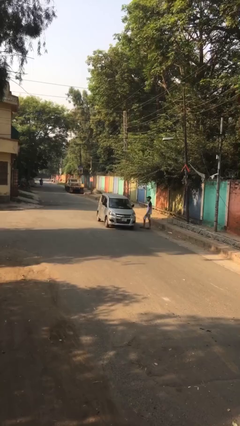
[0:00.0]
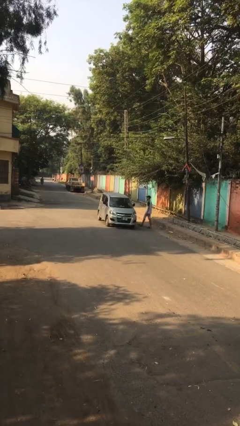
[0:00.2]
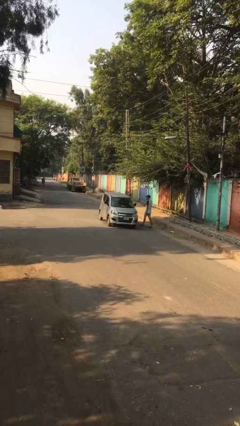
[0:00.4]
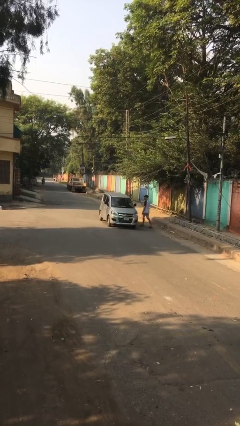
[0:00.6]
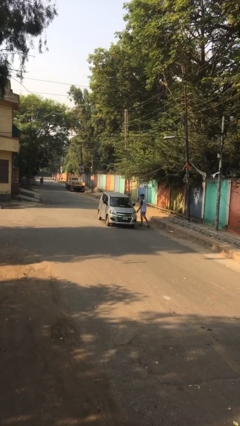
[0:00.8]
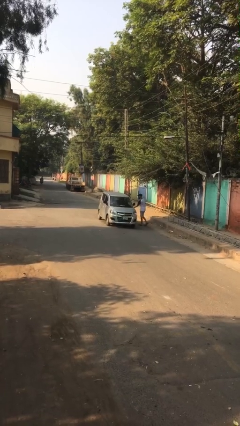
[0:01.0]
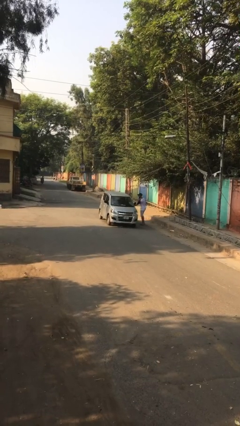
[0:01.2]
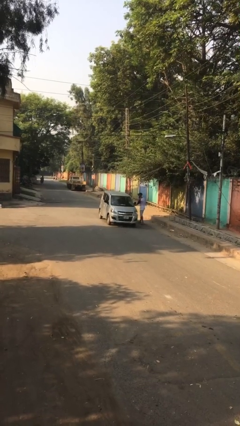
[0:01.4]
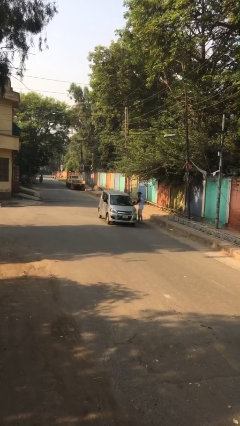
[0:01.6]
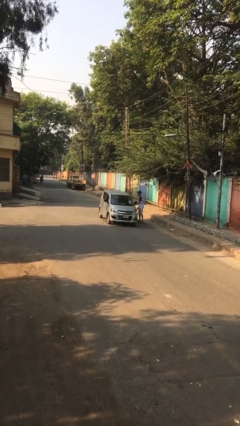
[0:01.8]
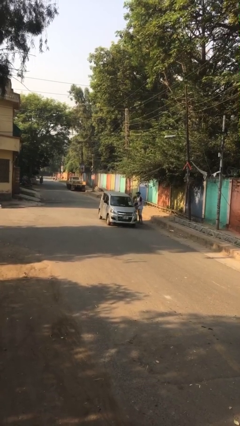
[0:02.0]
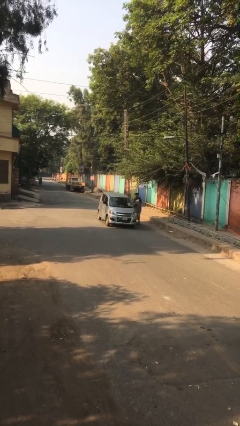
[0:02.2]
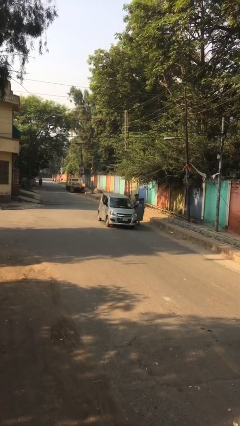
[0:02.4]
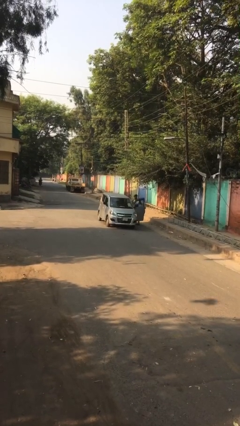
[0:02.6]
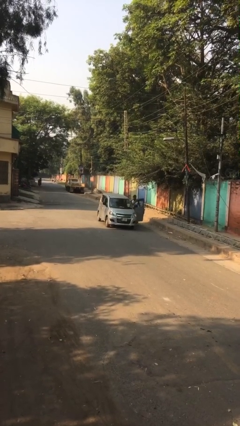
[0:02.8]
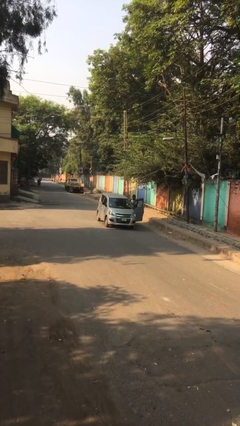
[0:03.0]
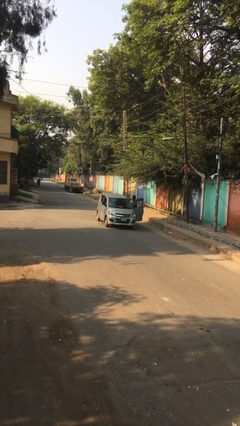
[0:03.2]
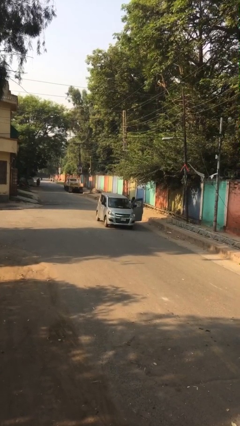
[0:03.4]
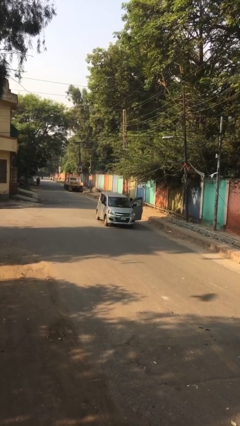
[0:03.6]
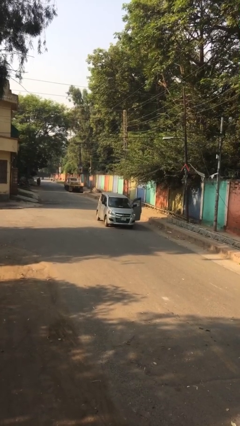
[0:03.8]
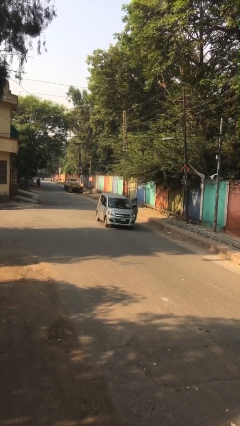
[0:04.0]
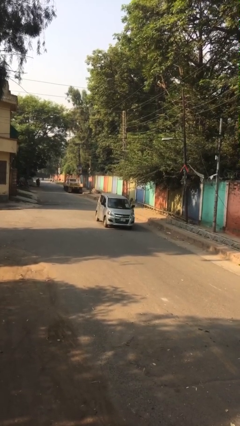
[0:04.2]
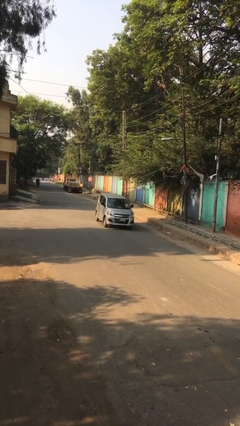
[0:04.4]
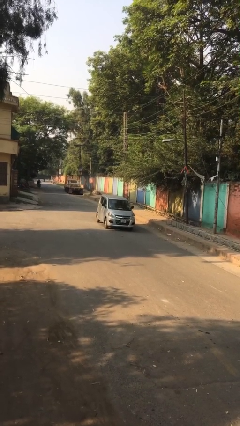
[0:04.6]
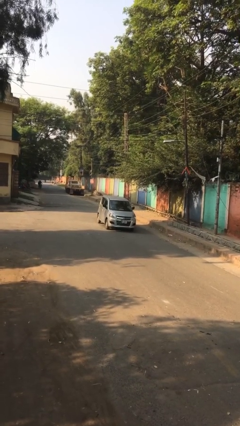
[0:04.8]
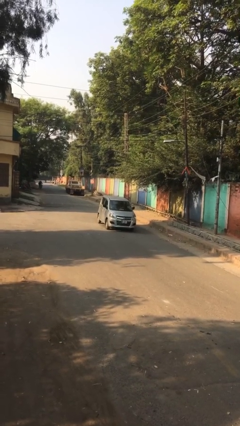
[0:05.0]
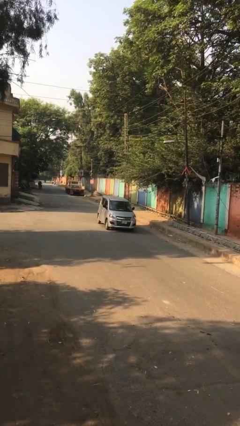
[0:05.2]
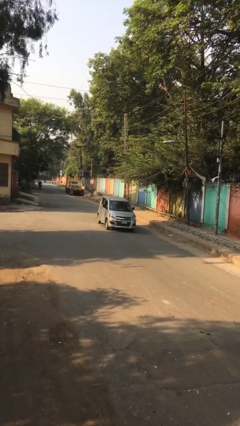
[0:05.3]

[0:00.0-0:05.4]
car picks up person

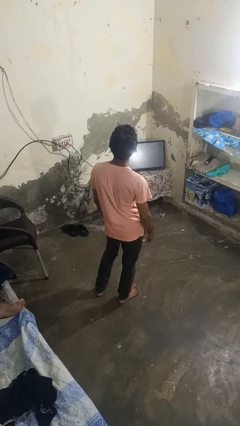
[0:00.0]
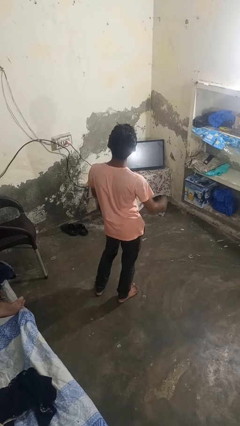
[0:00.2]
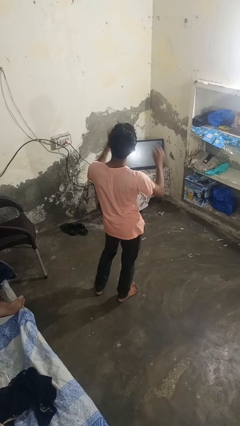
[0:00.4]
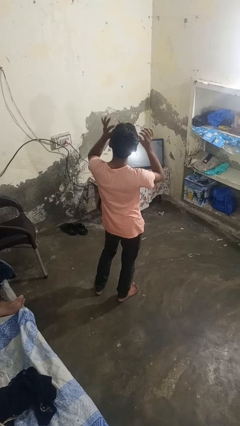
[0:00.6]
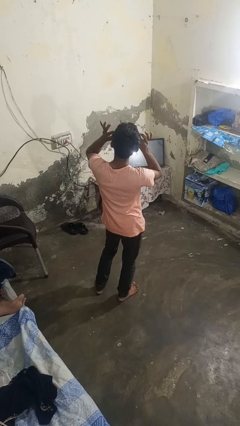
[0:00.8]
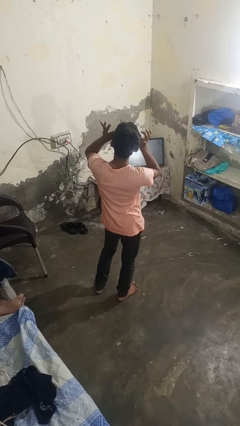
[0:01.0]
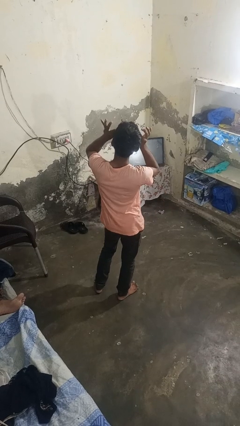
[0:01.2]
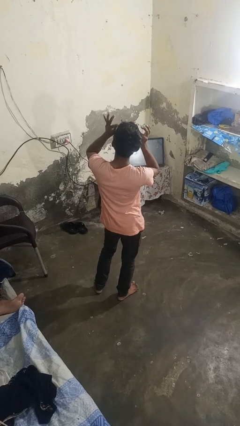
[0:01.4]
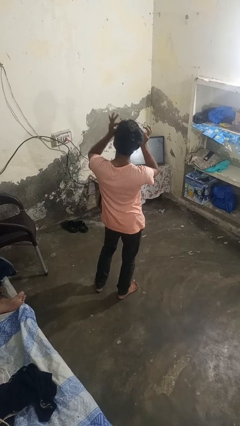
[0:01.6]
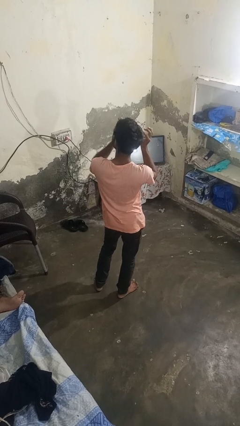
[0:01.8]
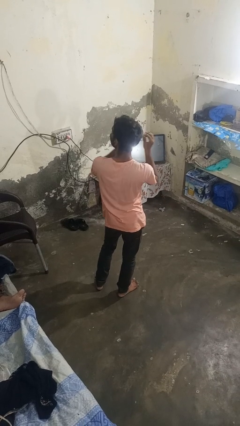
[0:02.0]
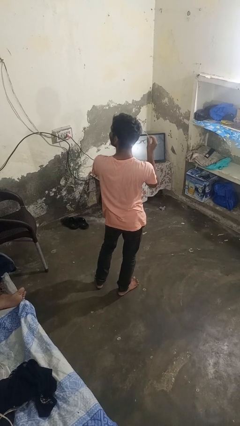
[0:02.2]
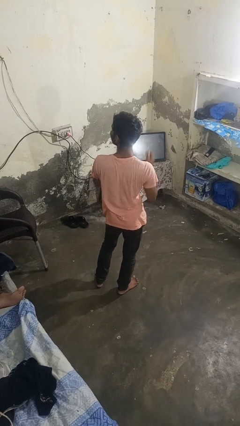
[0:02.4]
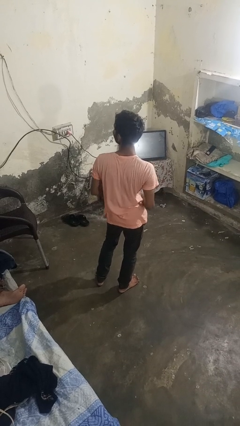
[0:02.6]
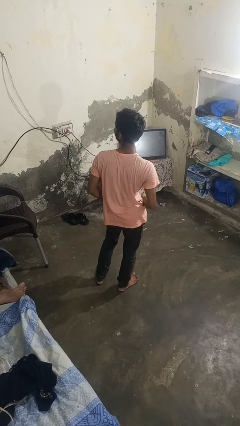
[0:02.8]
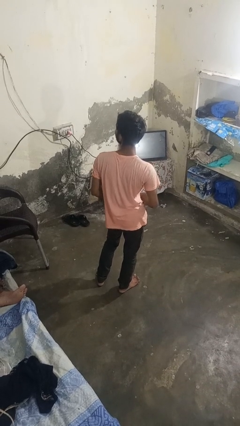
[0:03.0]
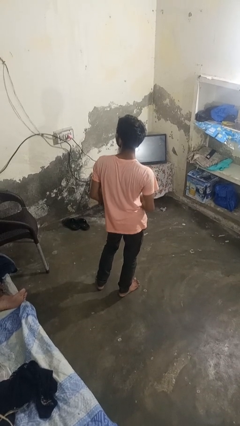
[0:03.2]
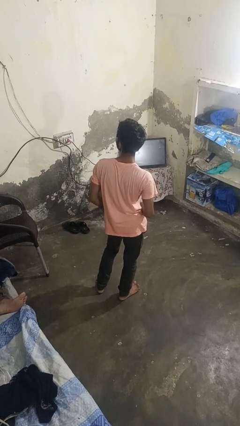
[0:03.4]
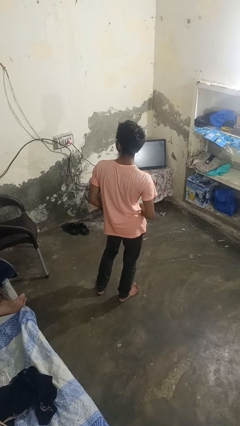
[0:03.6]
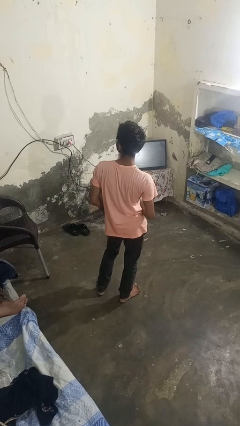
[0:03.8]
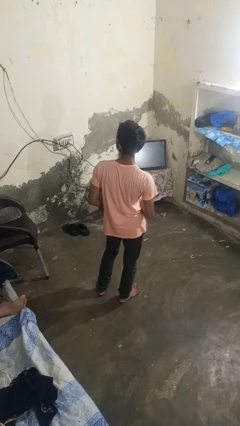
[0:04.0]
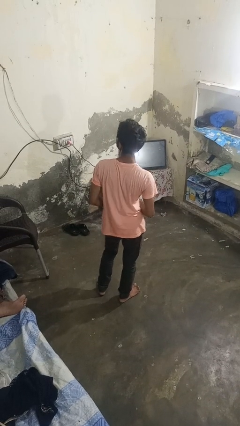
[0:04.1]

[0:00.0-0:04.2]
person takes off glasses

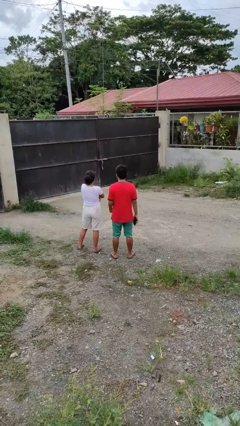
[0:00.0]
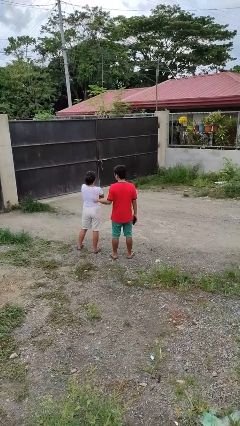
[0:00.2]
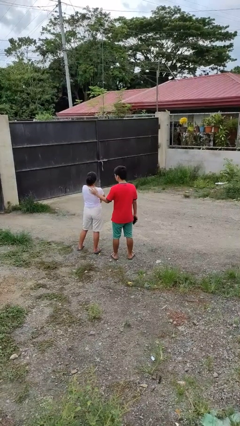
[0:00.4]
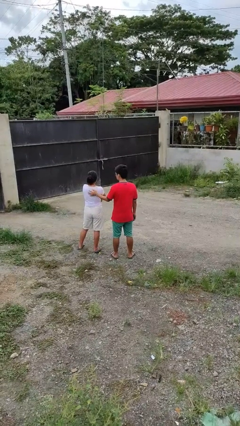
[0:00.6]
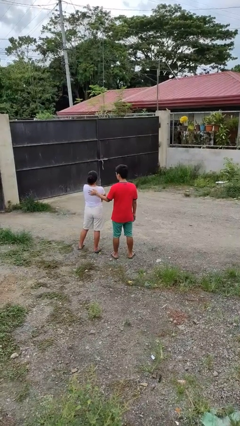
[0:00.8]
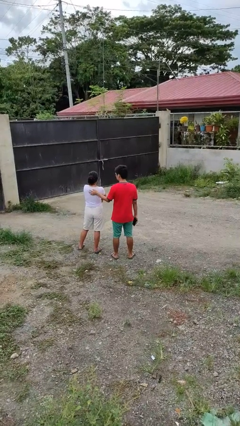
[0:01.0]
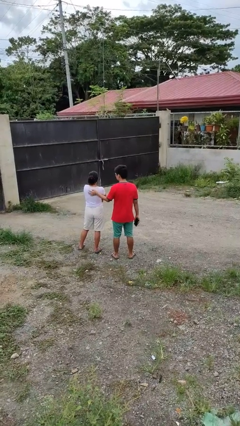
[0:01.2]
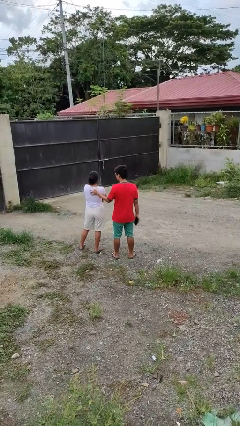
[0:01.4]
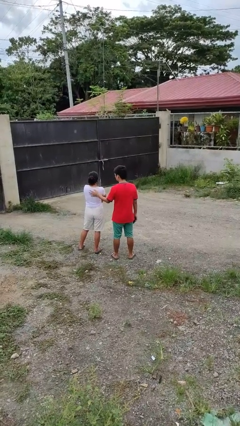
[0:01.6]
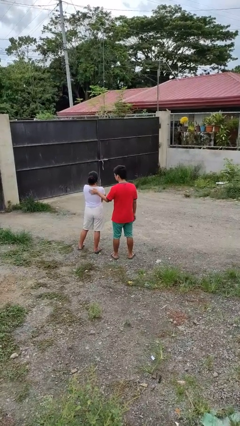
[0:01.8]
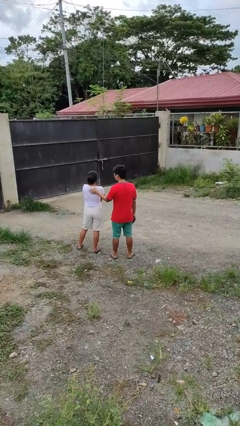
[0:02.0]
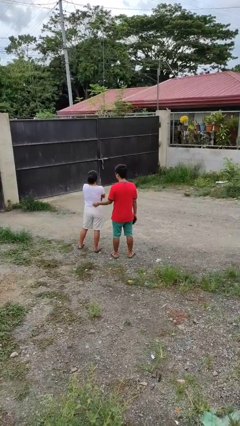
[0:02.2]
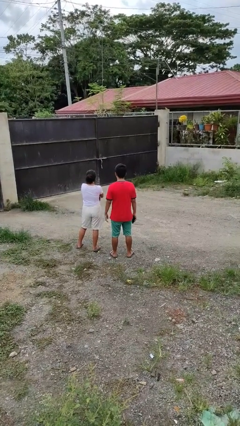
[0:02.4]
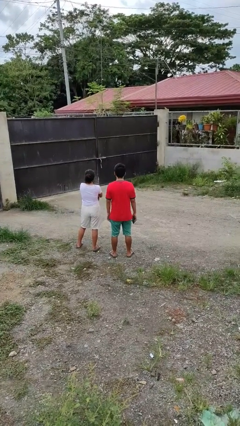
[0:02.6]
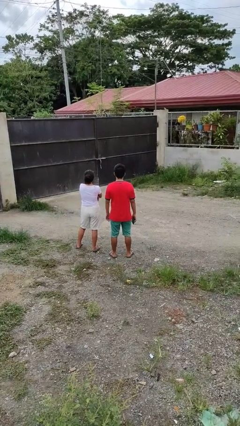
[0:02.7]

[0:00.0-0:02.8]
person touches back of person

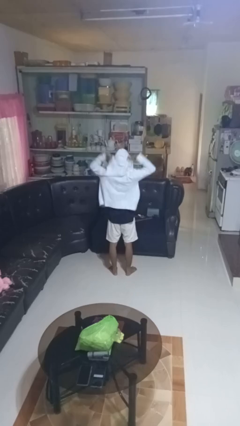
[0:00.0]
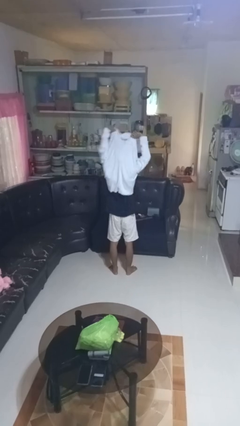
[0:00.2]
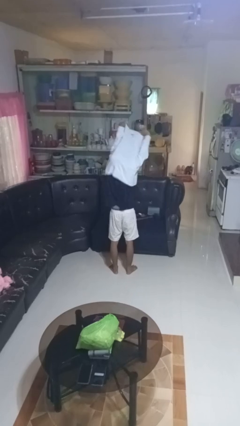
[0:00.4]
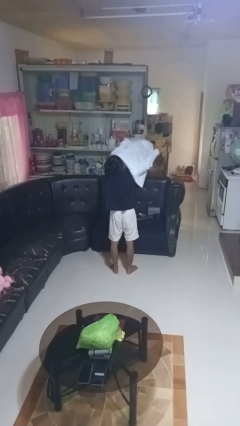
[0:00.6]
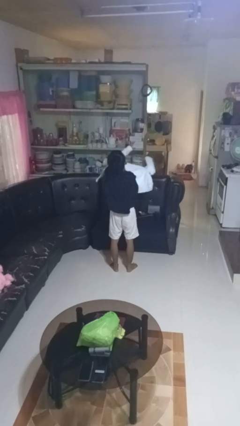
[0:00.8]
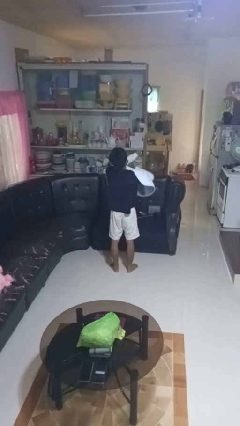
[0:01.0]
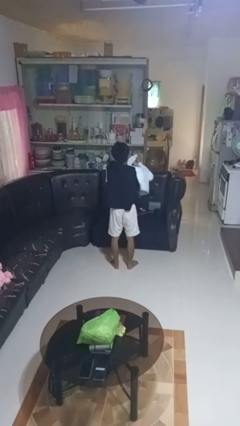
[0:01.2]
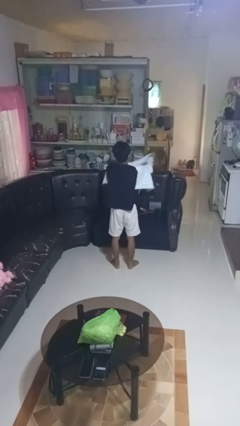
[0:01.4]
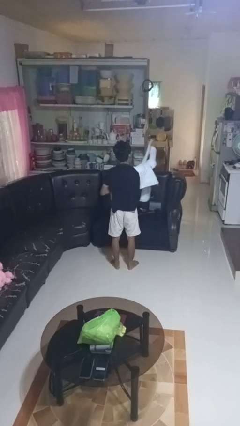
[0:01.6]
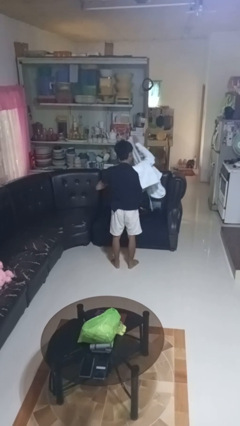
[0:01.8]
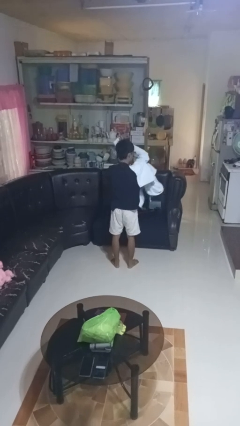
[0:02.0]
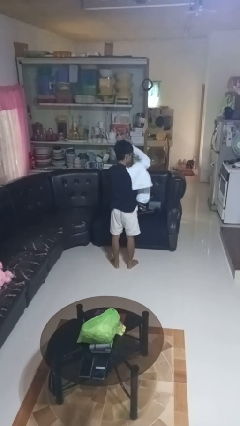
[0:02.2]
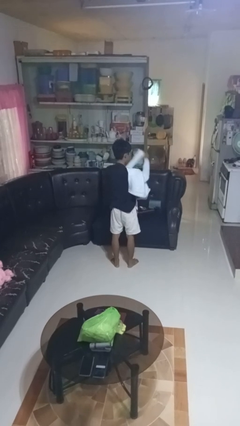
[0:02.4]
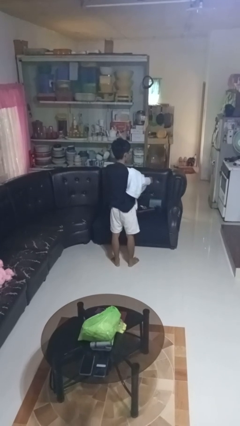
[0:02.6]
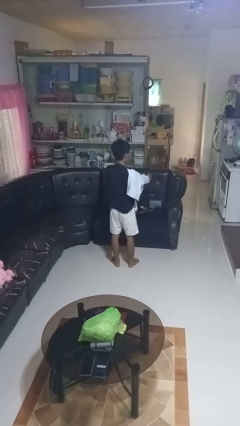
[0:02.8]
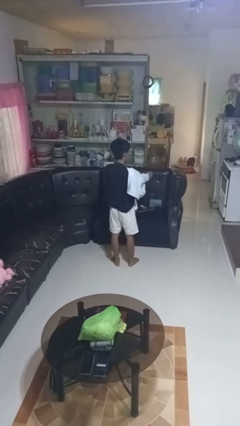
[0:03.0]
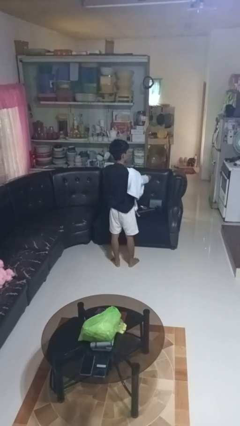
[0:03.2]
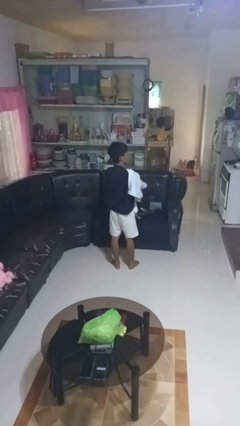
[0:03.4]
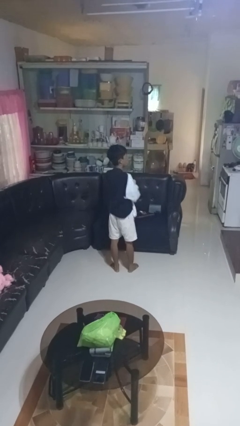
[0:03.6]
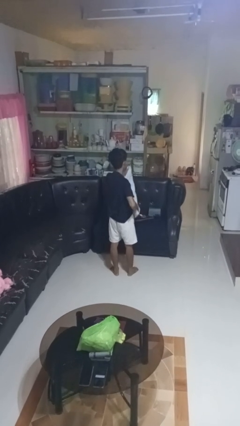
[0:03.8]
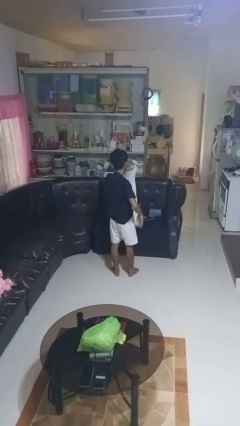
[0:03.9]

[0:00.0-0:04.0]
person takes off hoodie

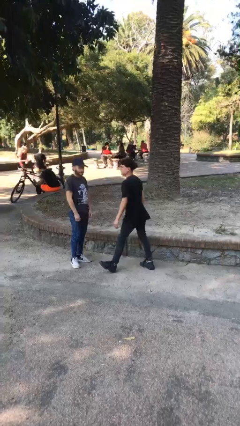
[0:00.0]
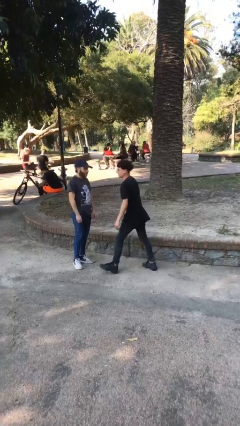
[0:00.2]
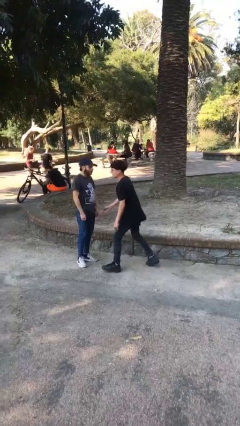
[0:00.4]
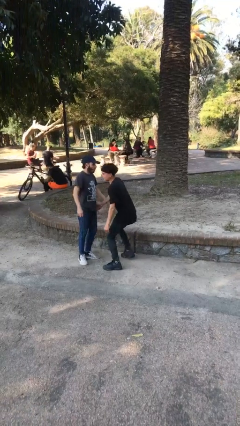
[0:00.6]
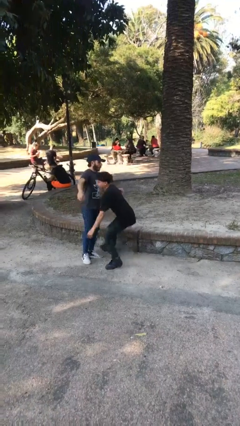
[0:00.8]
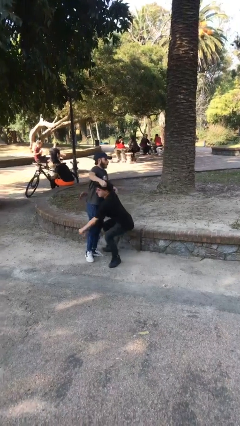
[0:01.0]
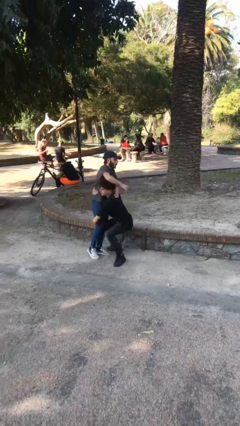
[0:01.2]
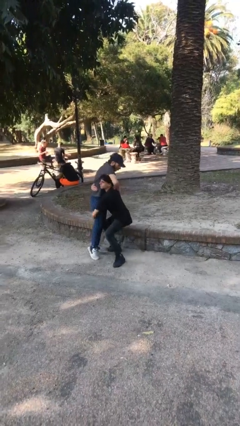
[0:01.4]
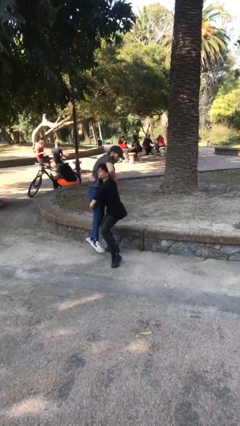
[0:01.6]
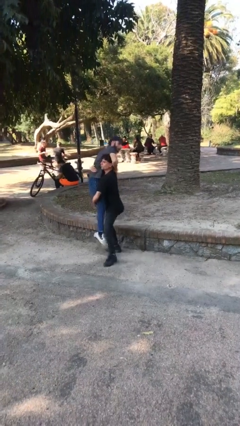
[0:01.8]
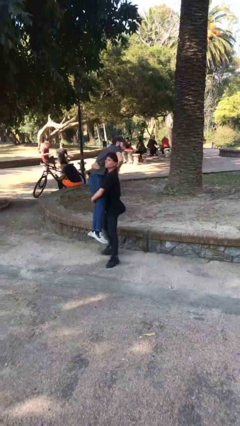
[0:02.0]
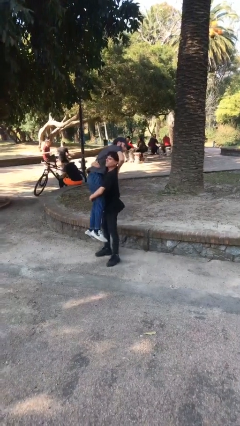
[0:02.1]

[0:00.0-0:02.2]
person picks up person
